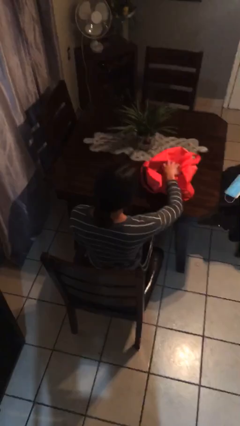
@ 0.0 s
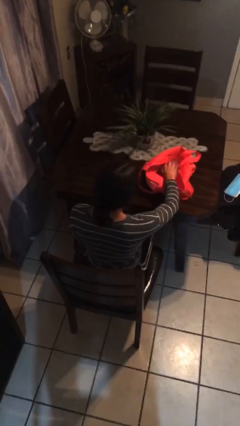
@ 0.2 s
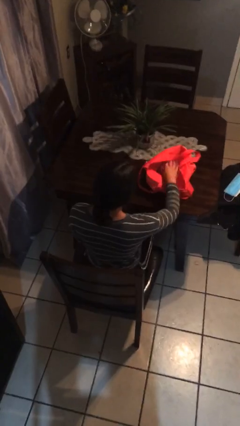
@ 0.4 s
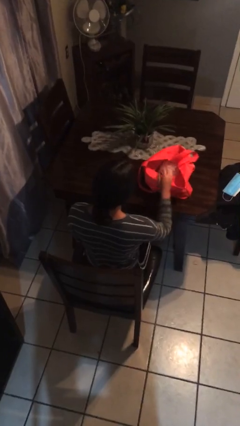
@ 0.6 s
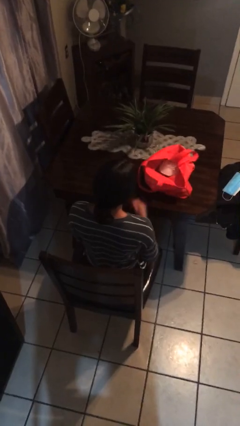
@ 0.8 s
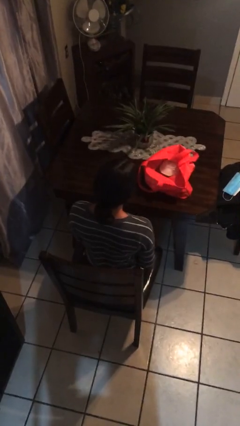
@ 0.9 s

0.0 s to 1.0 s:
person puts object into bag

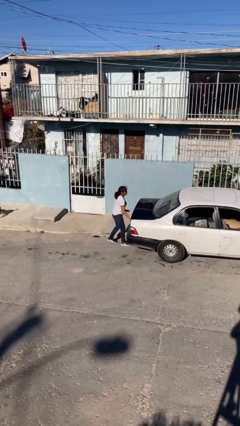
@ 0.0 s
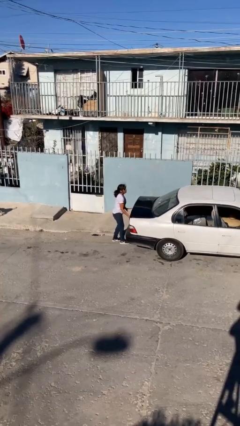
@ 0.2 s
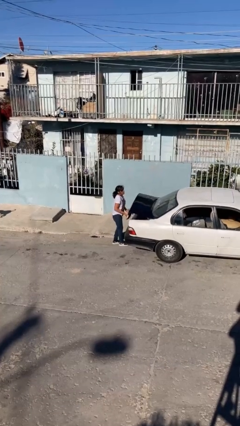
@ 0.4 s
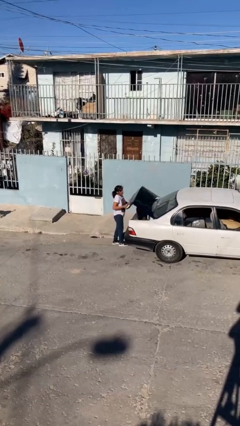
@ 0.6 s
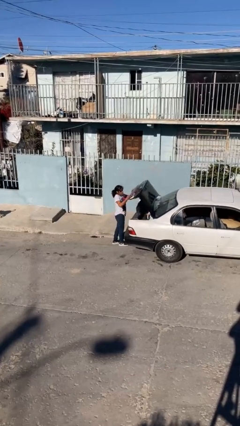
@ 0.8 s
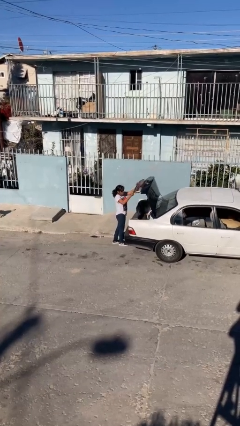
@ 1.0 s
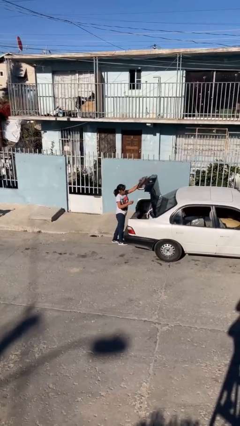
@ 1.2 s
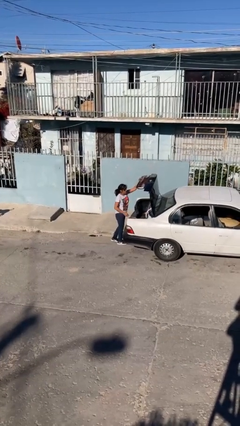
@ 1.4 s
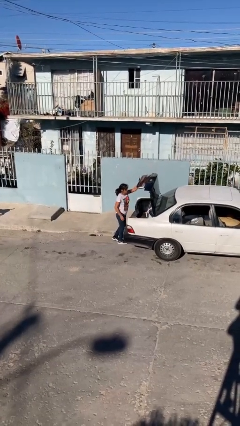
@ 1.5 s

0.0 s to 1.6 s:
person opens car trunk

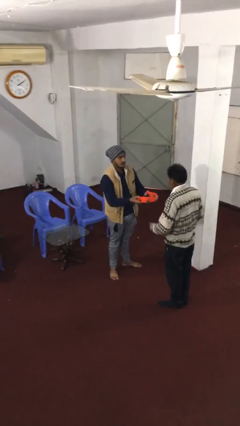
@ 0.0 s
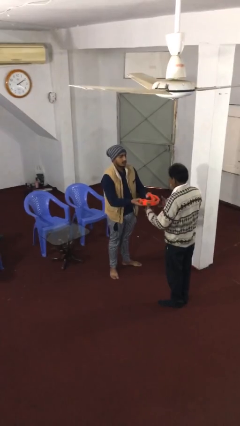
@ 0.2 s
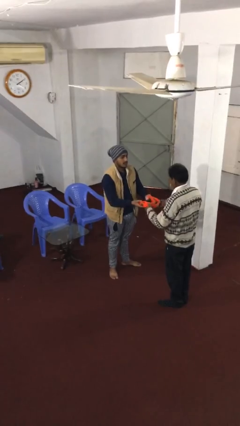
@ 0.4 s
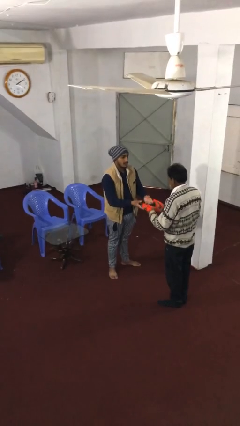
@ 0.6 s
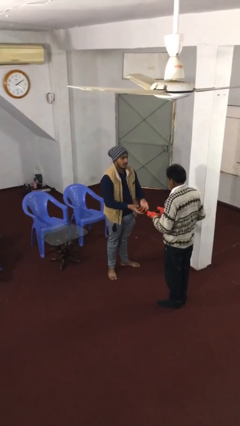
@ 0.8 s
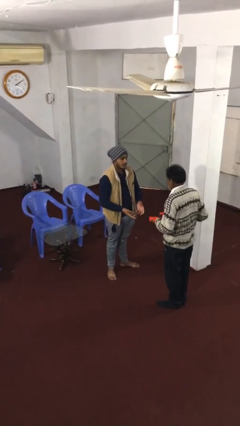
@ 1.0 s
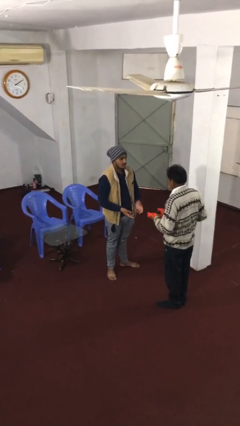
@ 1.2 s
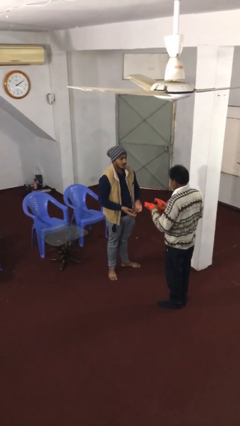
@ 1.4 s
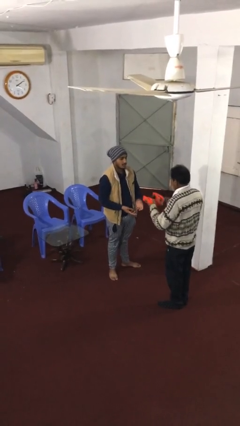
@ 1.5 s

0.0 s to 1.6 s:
person transfers object to person

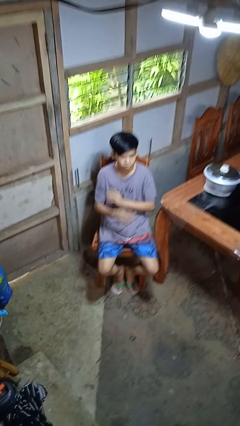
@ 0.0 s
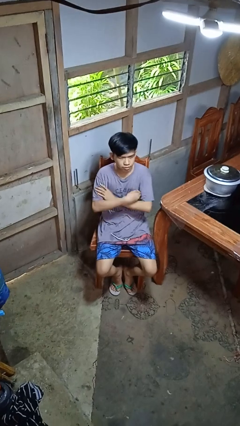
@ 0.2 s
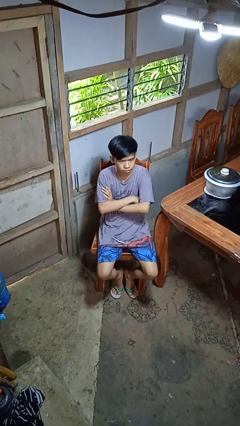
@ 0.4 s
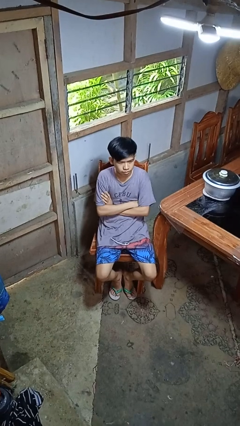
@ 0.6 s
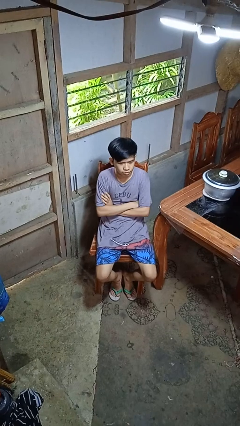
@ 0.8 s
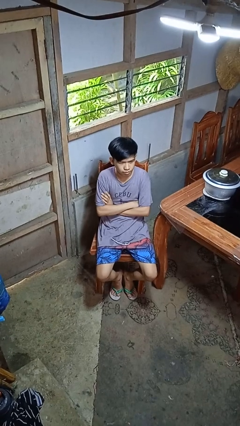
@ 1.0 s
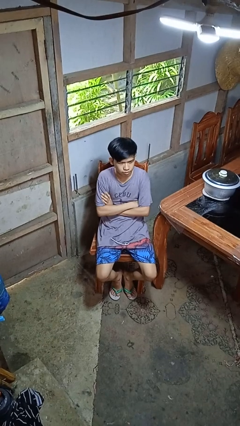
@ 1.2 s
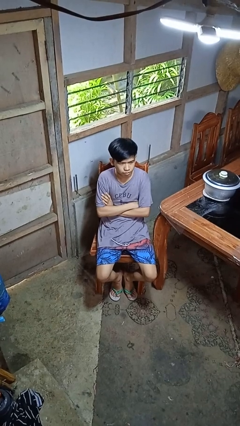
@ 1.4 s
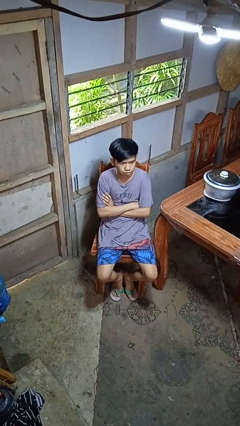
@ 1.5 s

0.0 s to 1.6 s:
person crosses arms

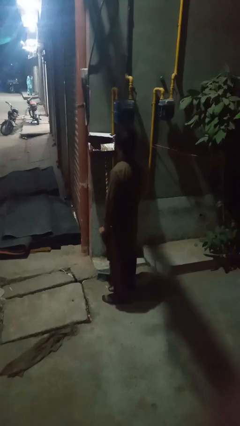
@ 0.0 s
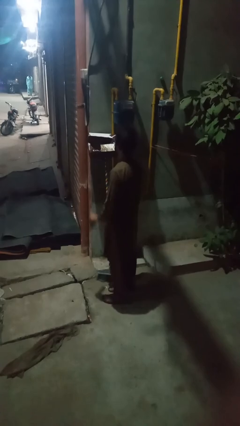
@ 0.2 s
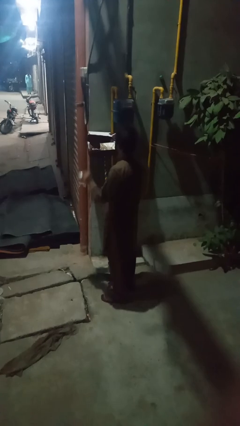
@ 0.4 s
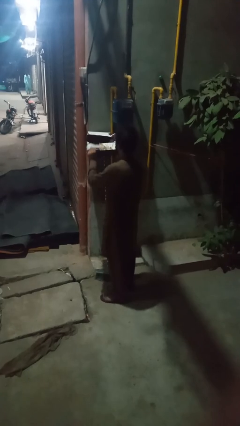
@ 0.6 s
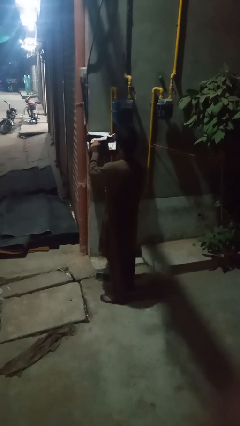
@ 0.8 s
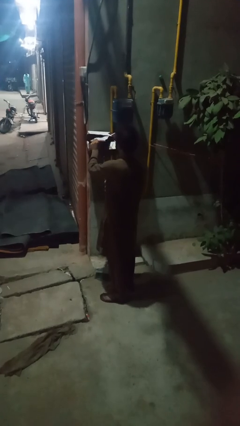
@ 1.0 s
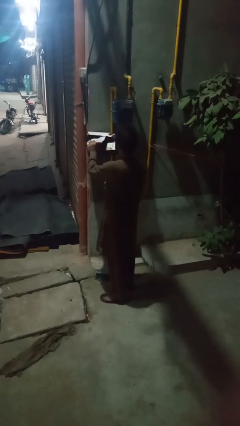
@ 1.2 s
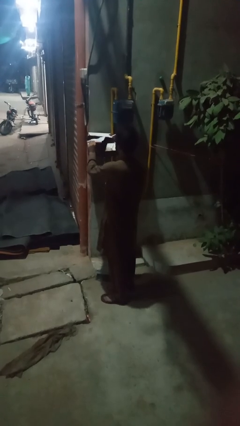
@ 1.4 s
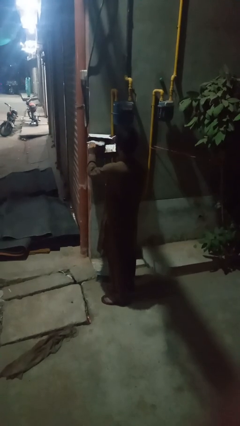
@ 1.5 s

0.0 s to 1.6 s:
person takes letters from mailbox

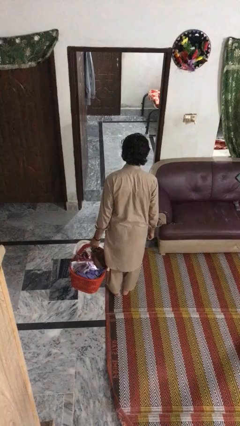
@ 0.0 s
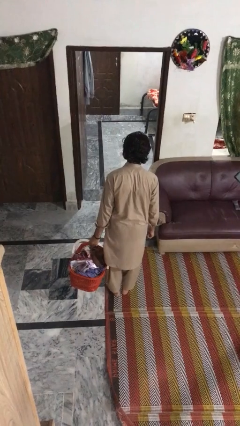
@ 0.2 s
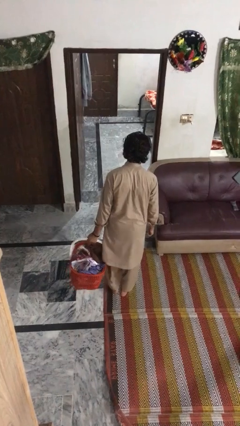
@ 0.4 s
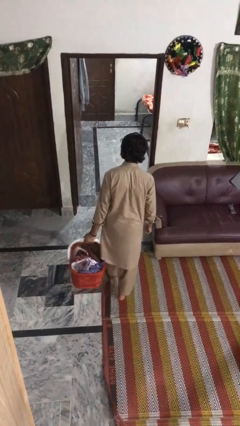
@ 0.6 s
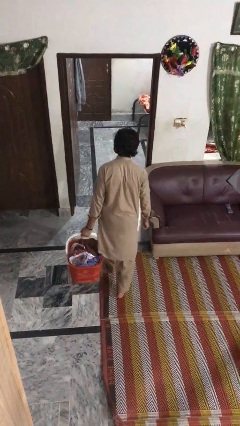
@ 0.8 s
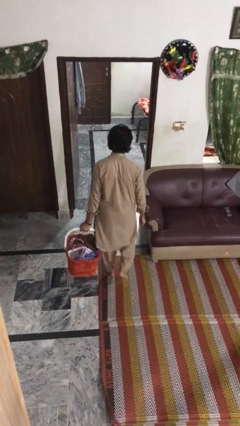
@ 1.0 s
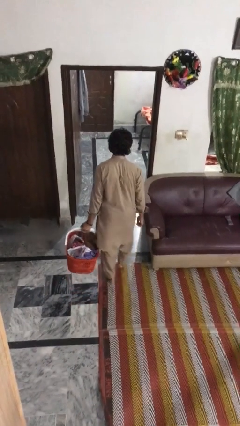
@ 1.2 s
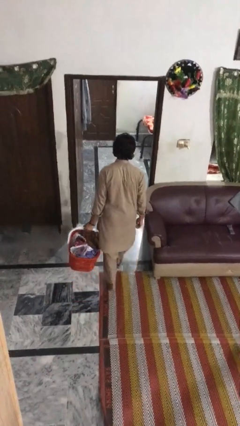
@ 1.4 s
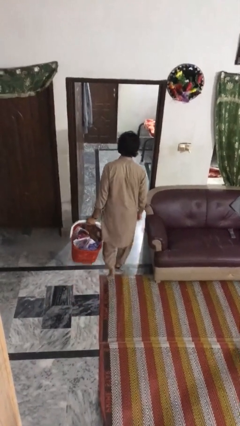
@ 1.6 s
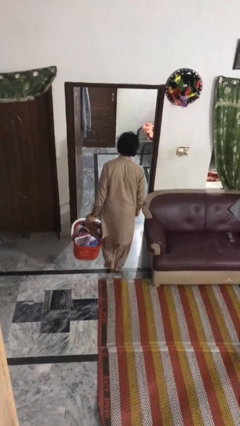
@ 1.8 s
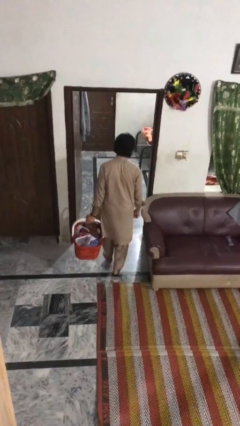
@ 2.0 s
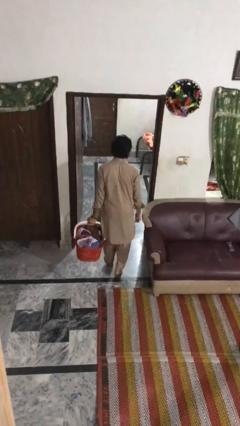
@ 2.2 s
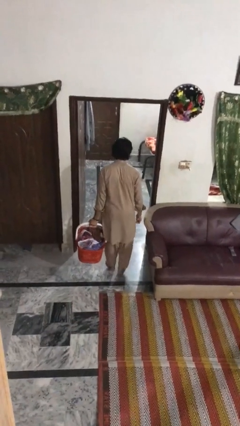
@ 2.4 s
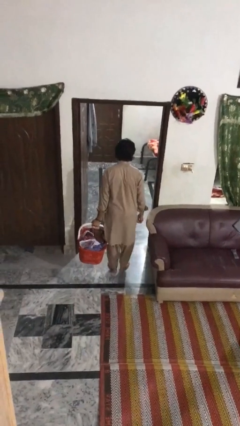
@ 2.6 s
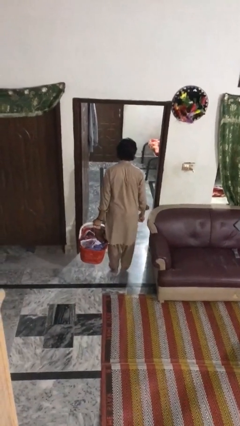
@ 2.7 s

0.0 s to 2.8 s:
person carries laundry basket

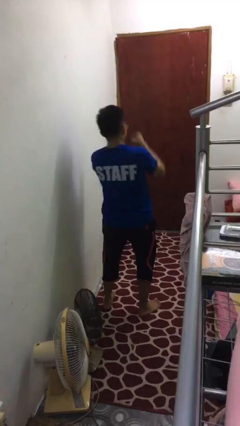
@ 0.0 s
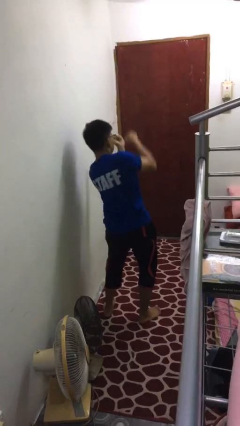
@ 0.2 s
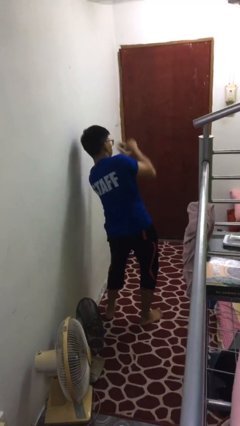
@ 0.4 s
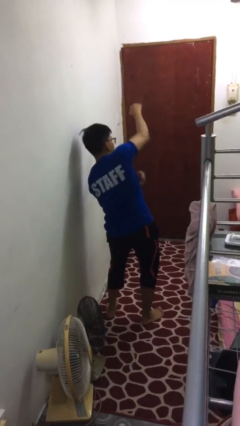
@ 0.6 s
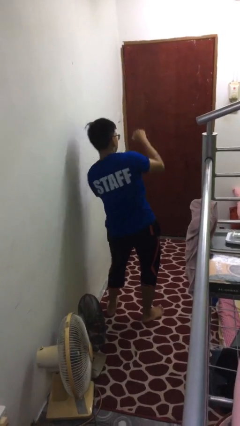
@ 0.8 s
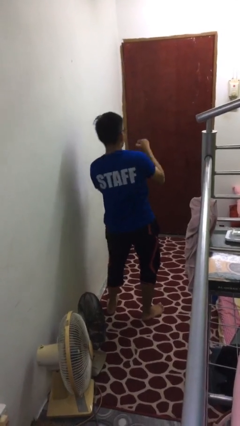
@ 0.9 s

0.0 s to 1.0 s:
person punches

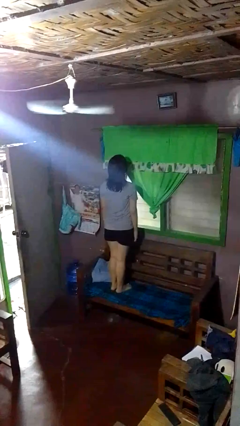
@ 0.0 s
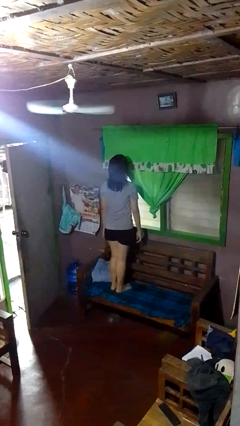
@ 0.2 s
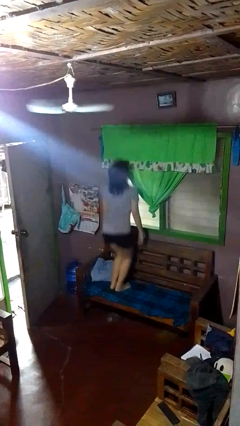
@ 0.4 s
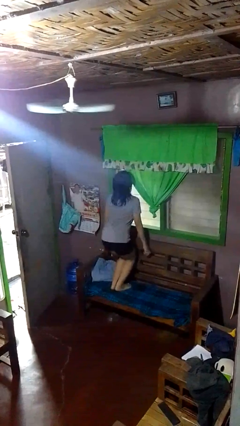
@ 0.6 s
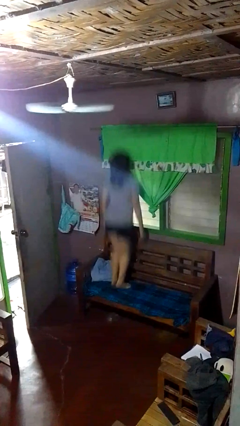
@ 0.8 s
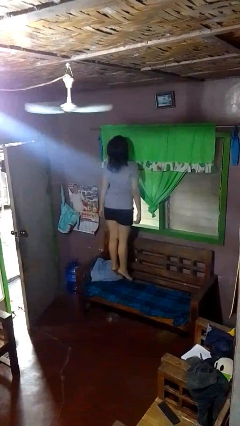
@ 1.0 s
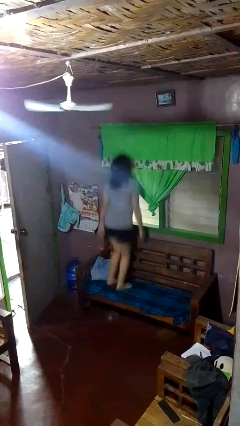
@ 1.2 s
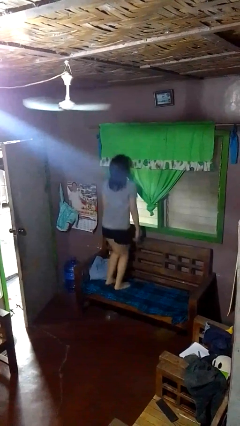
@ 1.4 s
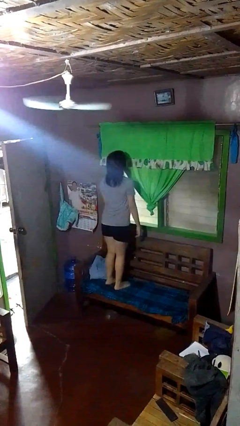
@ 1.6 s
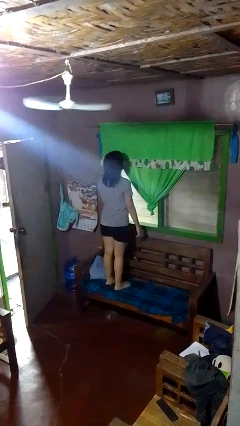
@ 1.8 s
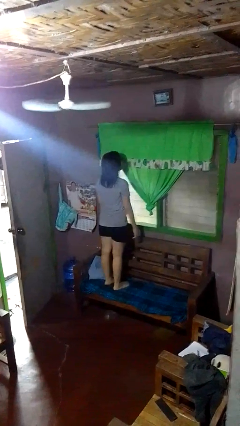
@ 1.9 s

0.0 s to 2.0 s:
person jumps on couch

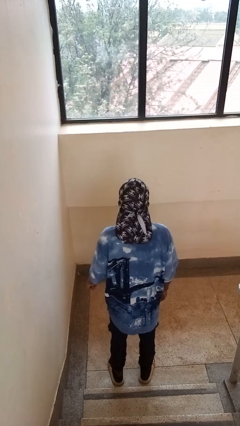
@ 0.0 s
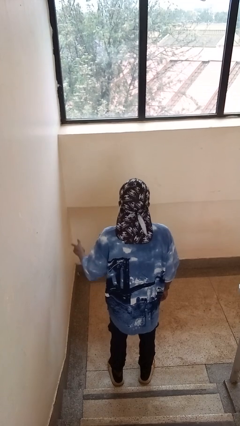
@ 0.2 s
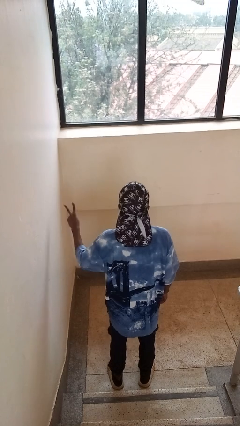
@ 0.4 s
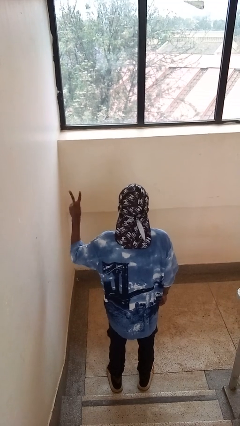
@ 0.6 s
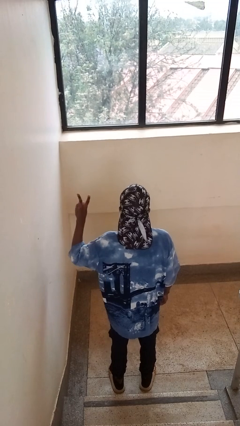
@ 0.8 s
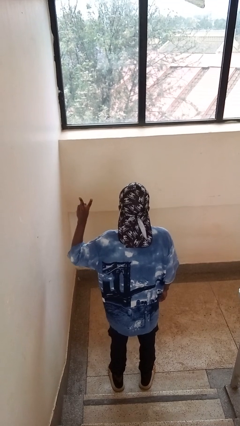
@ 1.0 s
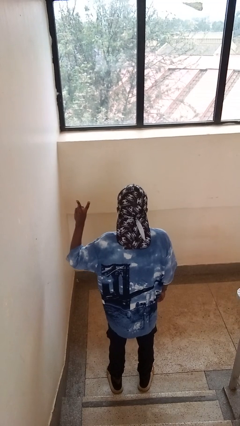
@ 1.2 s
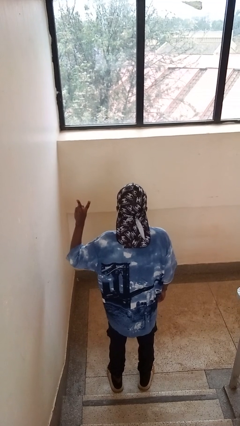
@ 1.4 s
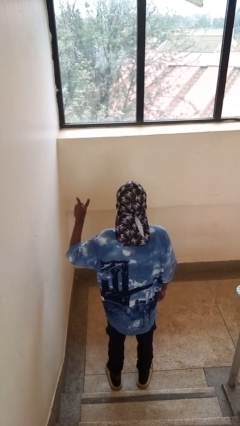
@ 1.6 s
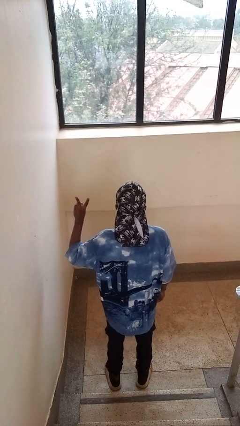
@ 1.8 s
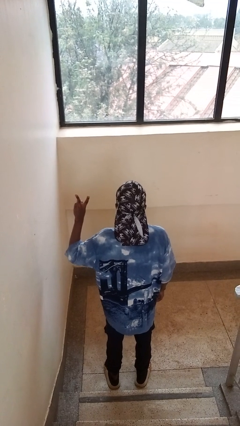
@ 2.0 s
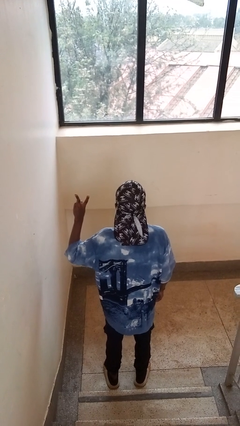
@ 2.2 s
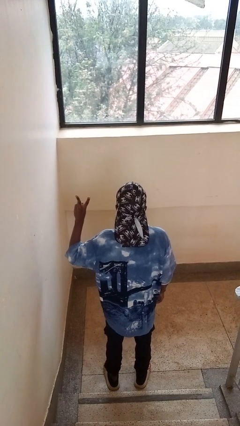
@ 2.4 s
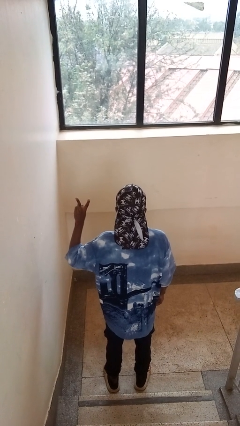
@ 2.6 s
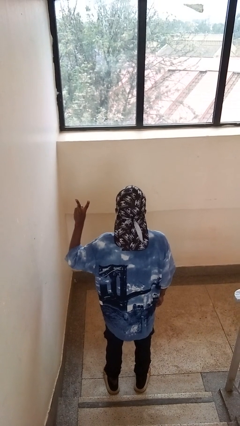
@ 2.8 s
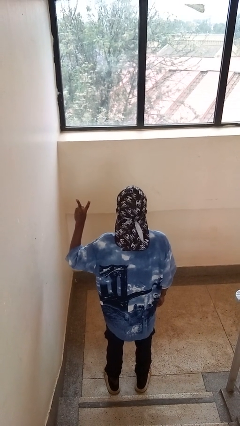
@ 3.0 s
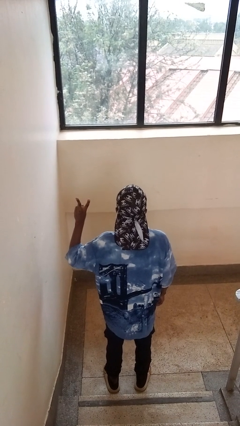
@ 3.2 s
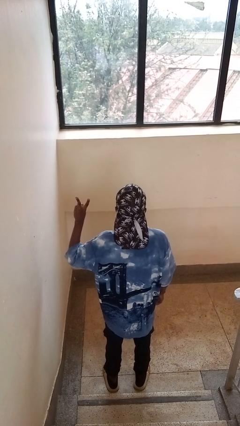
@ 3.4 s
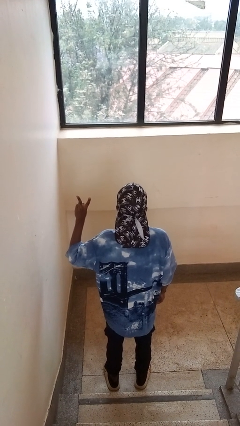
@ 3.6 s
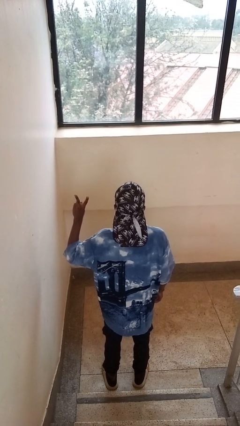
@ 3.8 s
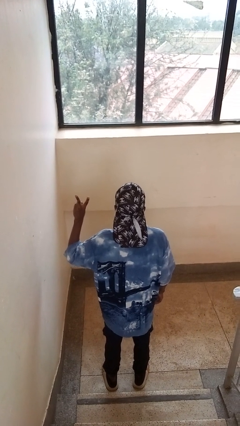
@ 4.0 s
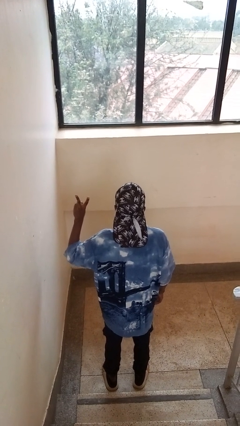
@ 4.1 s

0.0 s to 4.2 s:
person gestures peace
